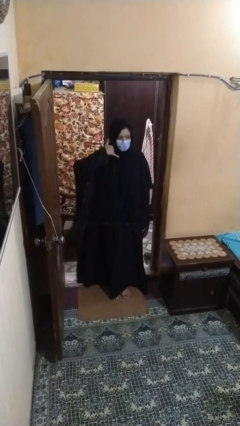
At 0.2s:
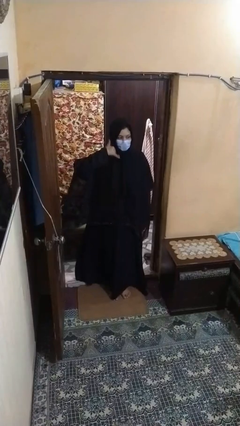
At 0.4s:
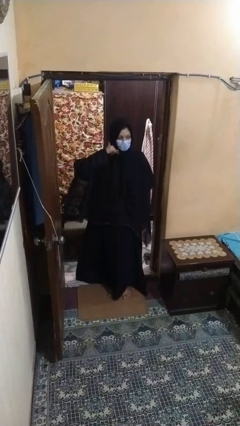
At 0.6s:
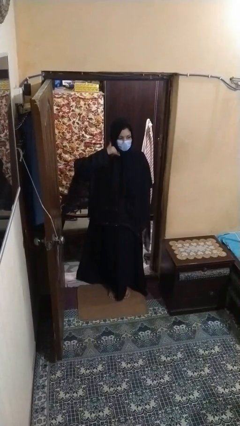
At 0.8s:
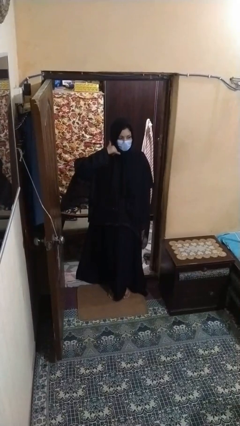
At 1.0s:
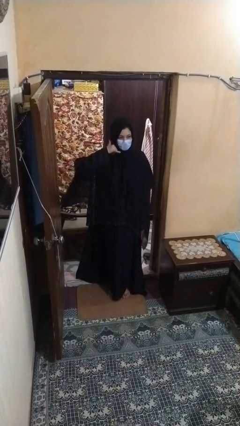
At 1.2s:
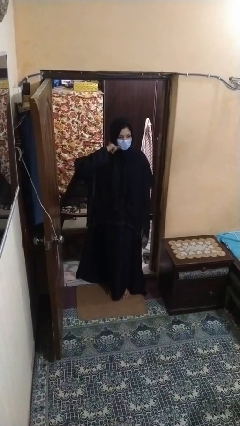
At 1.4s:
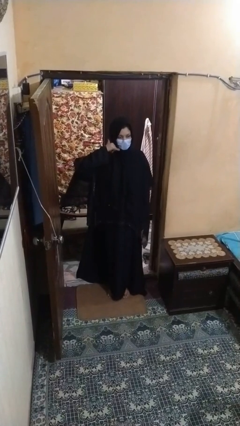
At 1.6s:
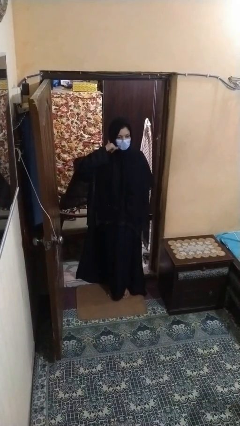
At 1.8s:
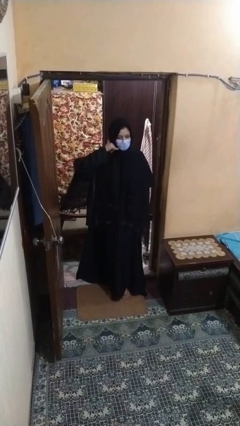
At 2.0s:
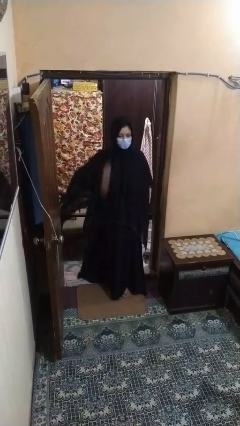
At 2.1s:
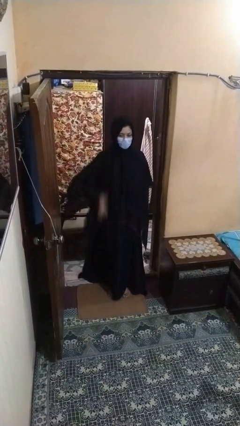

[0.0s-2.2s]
person gestures call me

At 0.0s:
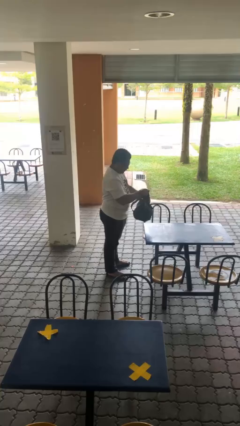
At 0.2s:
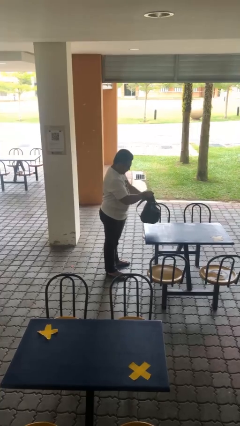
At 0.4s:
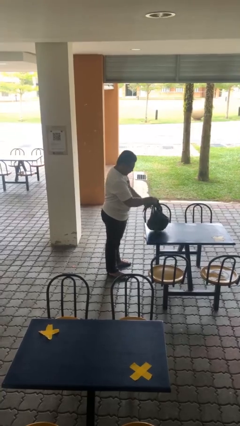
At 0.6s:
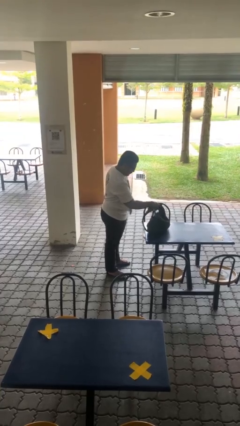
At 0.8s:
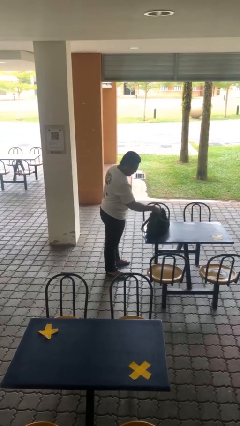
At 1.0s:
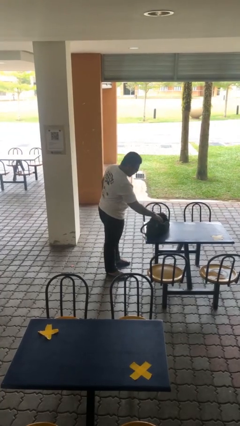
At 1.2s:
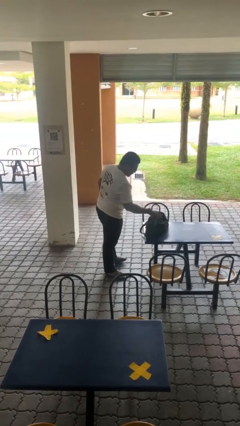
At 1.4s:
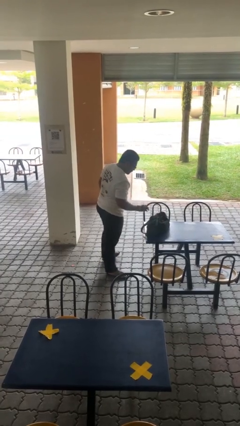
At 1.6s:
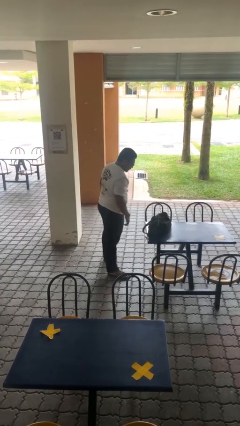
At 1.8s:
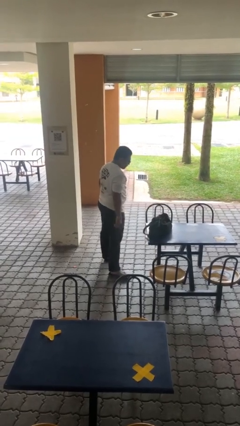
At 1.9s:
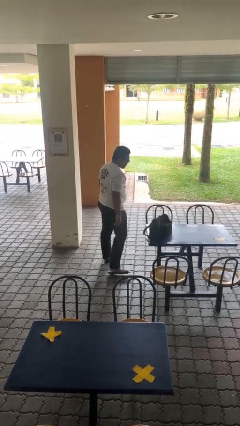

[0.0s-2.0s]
person puts down object on table

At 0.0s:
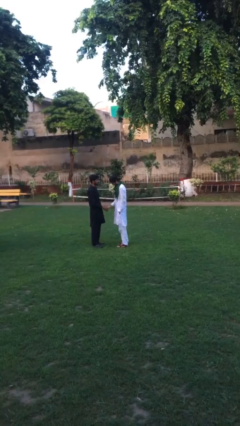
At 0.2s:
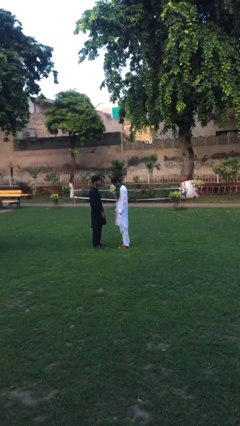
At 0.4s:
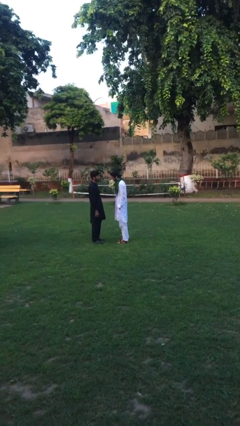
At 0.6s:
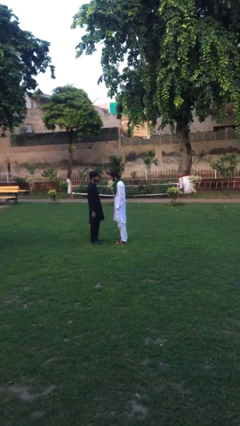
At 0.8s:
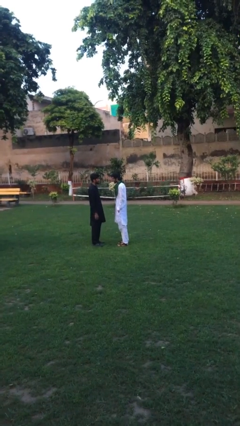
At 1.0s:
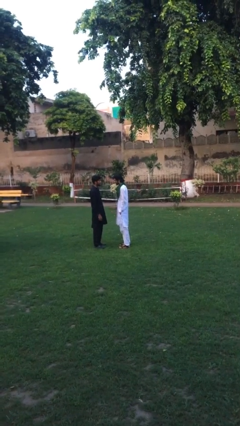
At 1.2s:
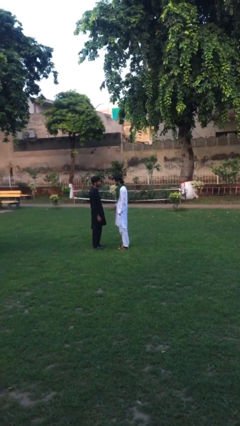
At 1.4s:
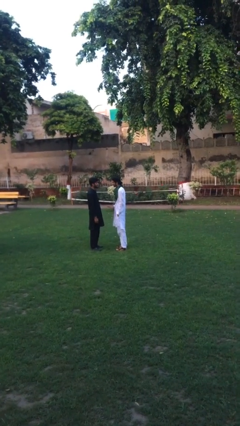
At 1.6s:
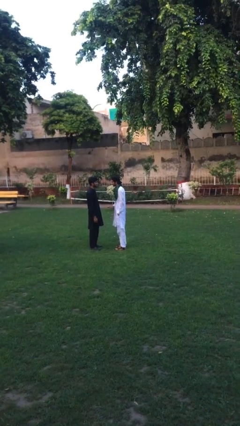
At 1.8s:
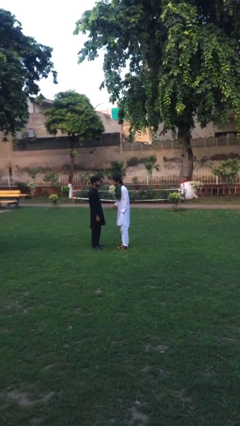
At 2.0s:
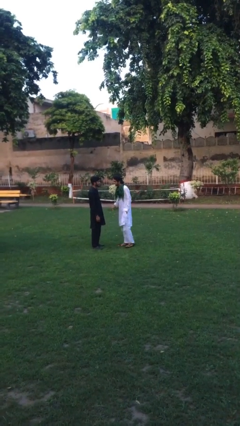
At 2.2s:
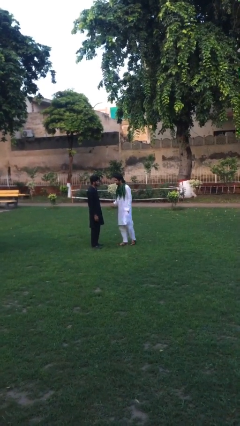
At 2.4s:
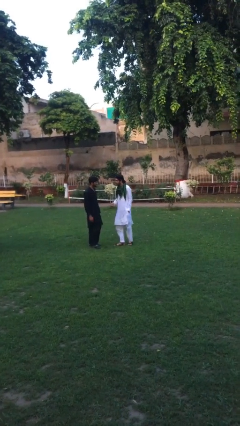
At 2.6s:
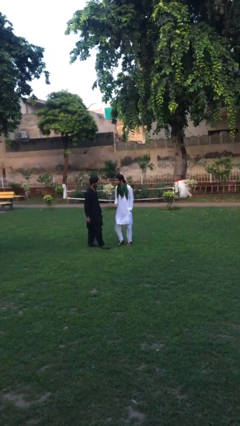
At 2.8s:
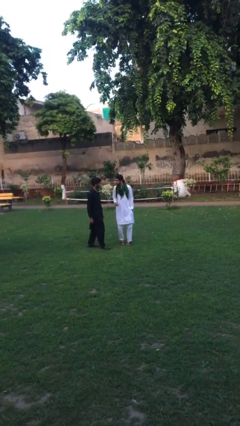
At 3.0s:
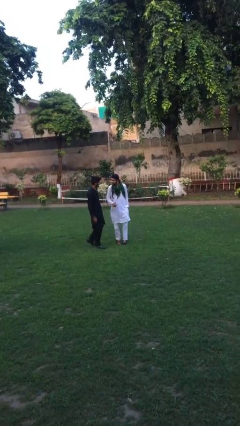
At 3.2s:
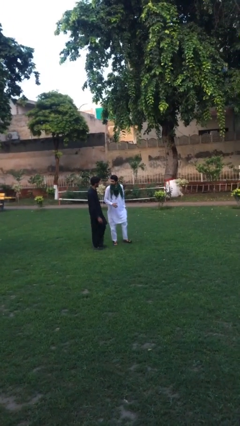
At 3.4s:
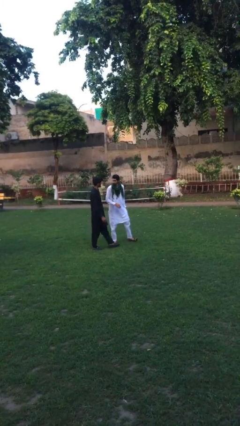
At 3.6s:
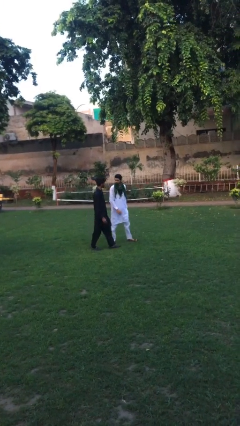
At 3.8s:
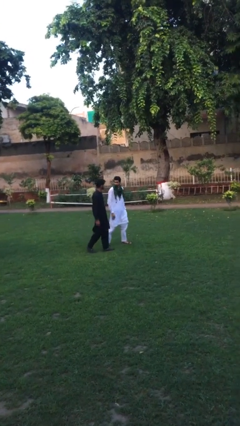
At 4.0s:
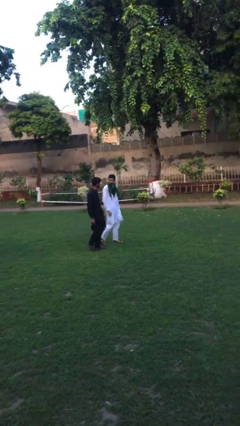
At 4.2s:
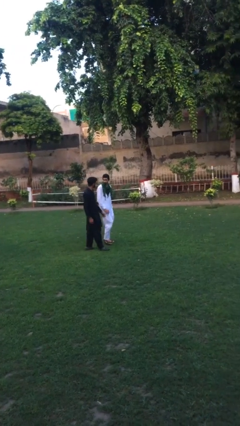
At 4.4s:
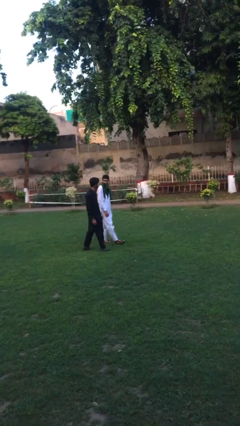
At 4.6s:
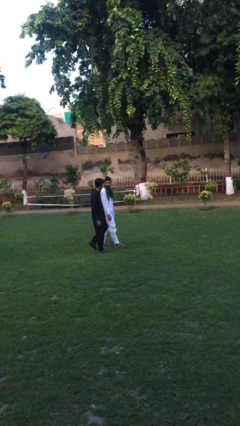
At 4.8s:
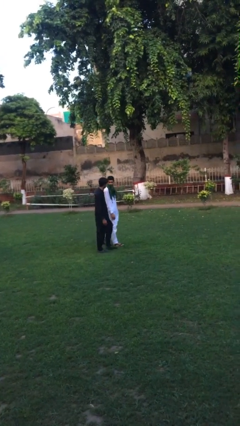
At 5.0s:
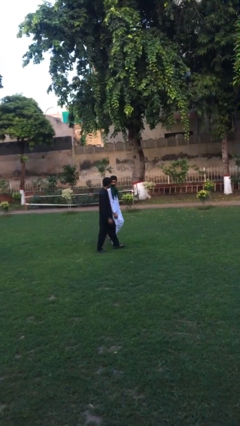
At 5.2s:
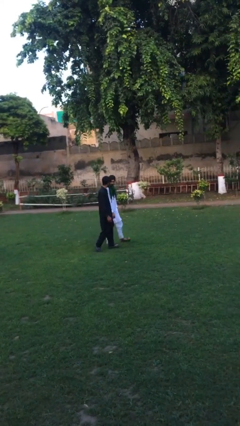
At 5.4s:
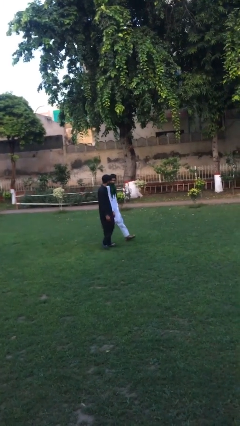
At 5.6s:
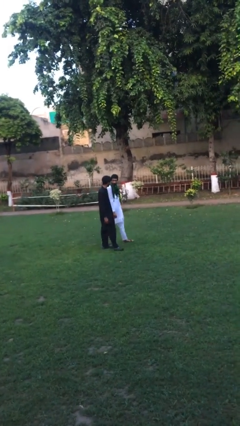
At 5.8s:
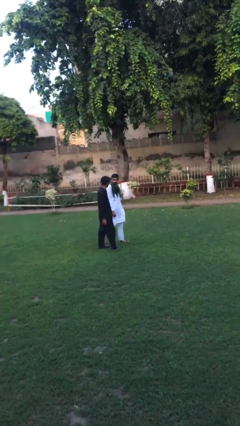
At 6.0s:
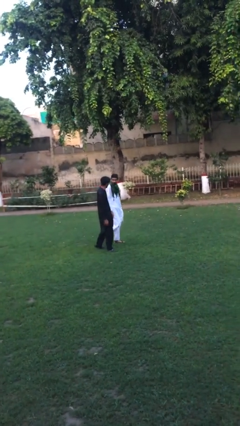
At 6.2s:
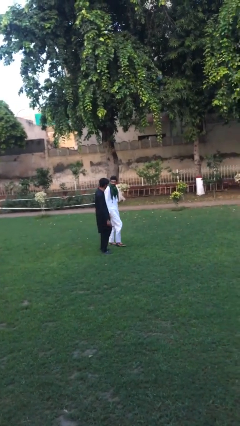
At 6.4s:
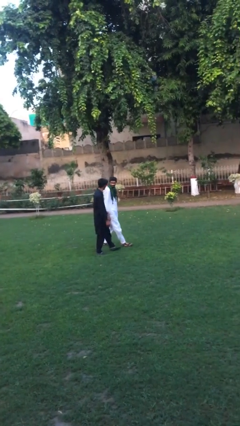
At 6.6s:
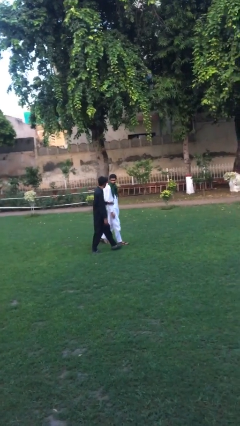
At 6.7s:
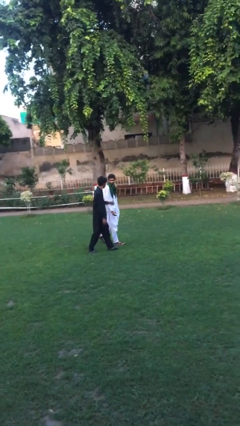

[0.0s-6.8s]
person talks to person

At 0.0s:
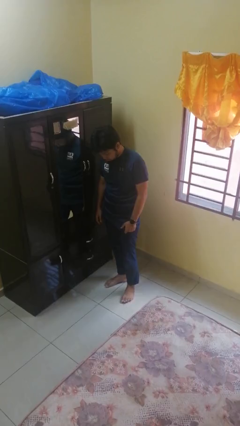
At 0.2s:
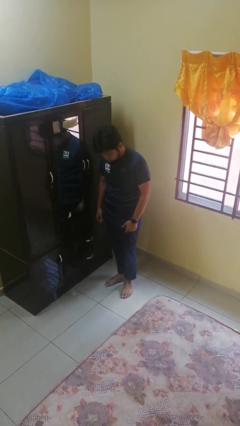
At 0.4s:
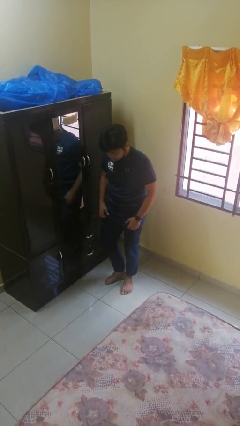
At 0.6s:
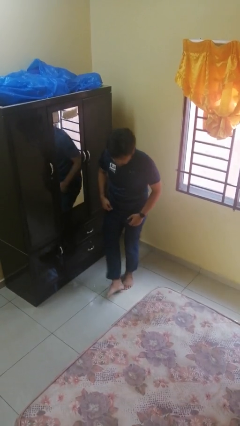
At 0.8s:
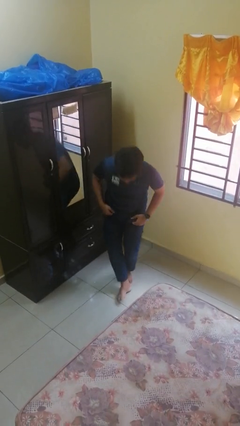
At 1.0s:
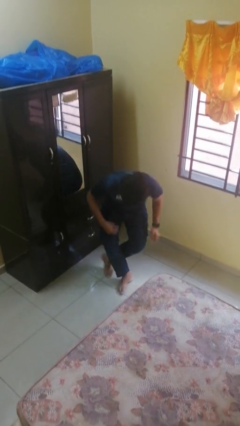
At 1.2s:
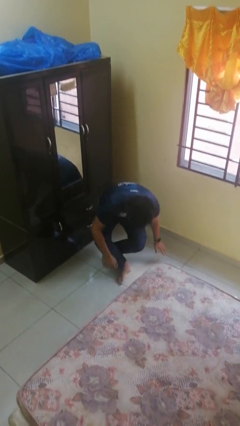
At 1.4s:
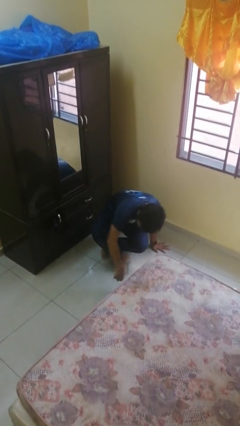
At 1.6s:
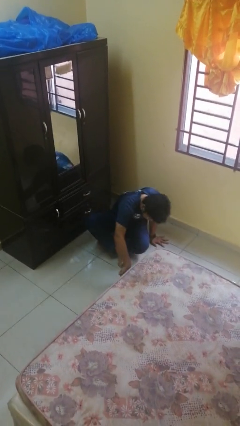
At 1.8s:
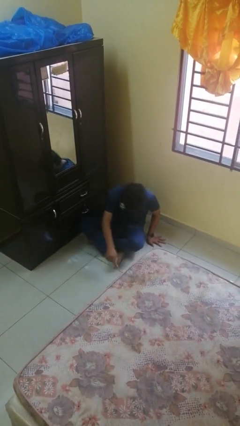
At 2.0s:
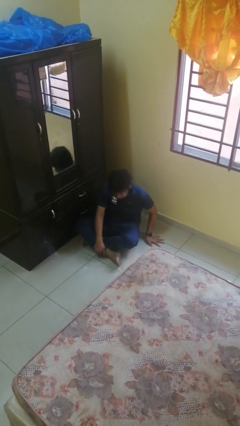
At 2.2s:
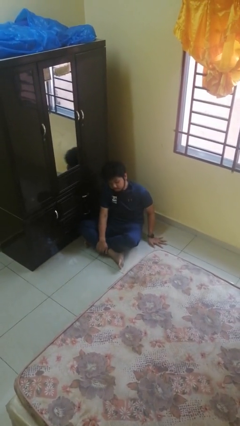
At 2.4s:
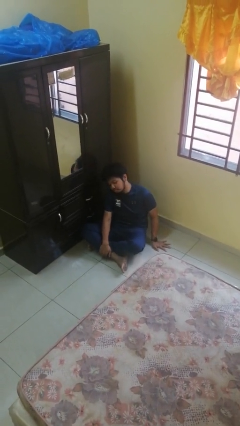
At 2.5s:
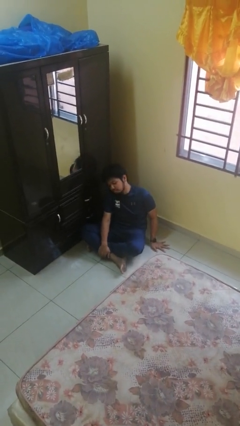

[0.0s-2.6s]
person sits crisscross

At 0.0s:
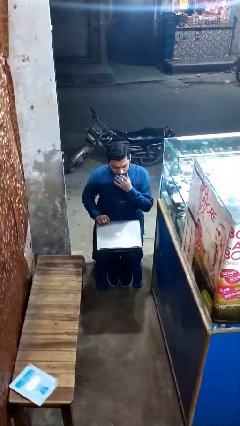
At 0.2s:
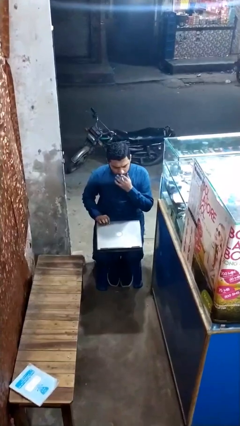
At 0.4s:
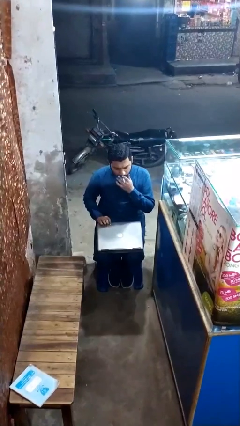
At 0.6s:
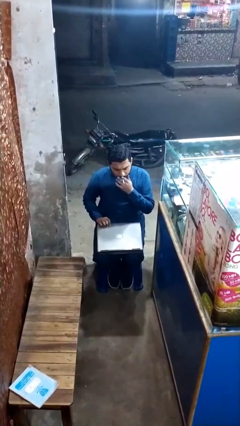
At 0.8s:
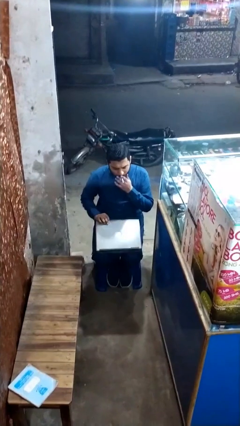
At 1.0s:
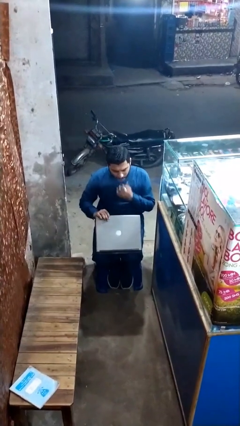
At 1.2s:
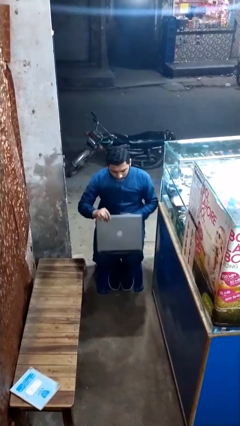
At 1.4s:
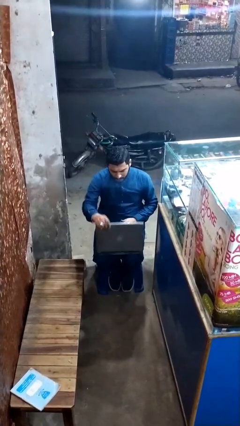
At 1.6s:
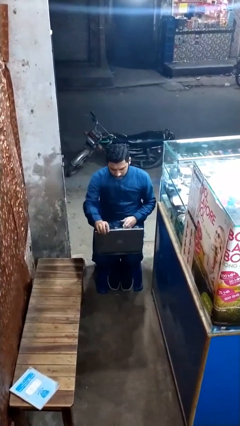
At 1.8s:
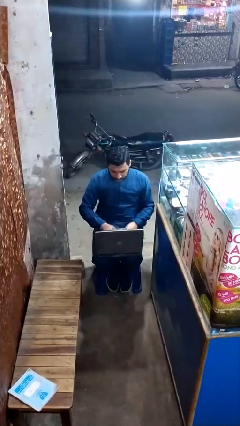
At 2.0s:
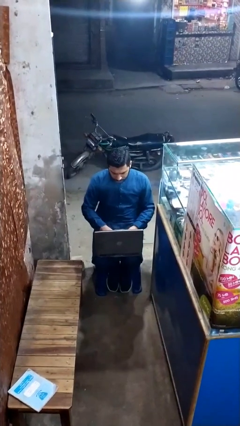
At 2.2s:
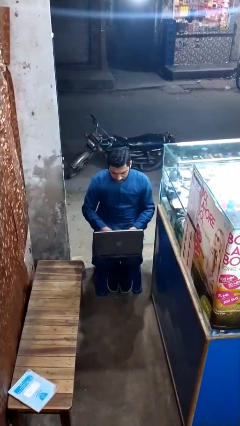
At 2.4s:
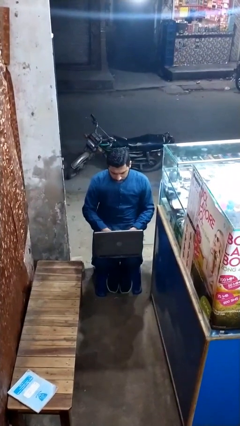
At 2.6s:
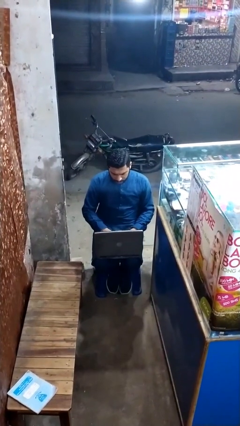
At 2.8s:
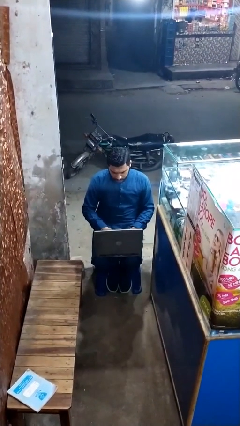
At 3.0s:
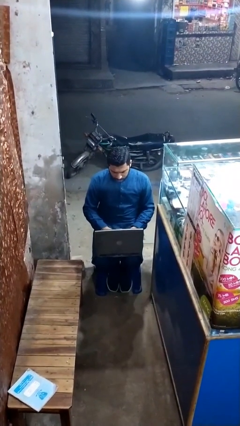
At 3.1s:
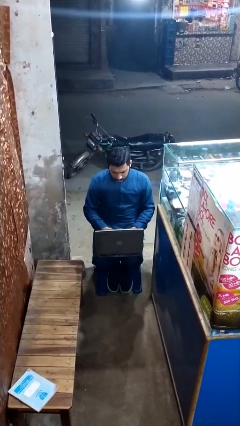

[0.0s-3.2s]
person interacts with laptop

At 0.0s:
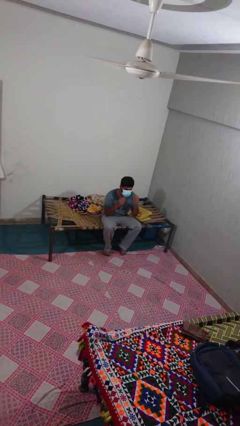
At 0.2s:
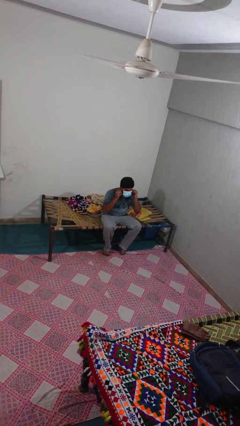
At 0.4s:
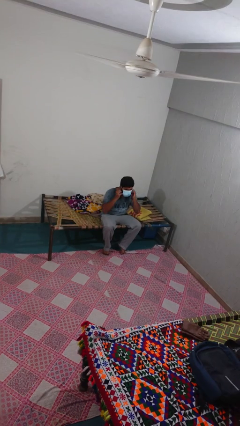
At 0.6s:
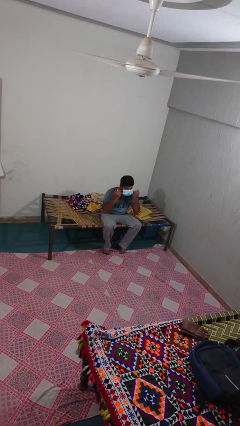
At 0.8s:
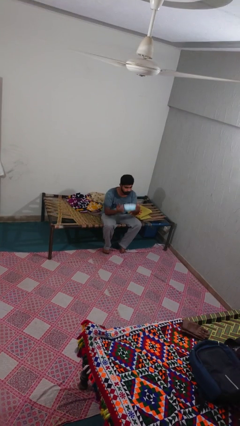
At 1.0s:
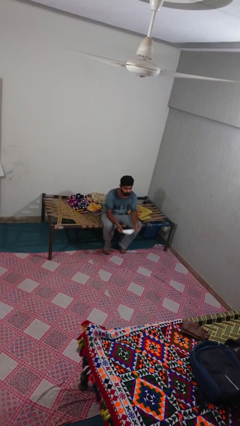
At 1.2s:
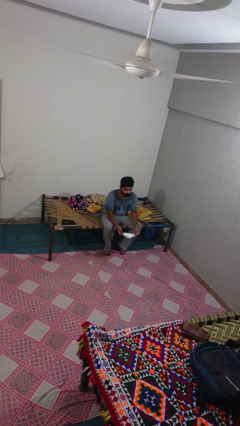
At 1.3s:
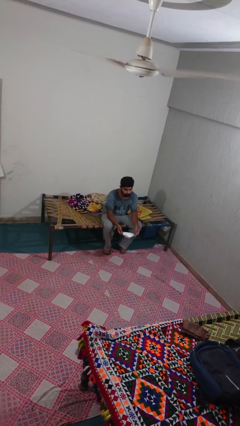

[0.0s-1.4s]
person takes off facemask
